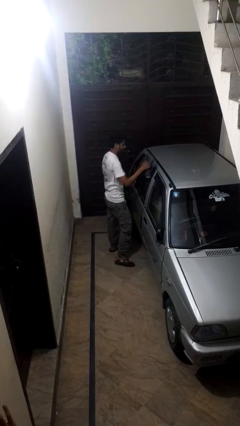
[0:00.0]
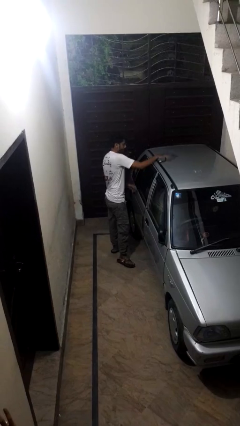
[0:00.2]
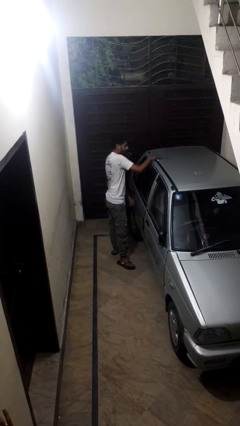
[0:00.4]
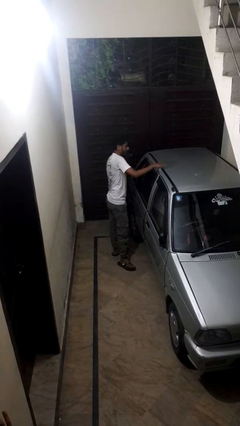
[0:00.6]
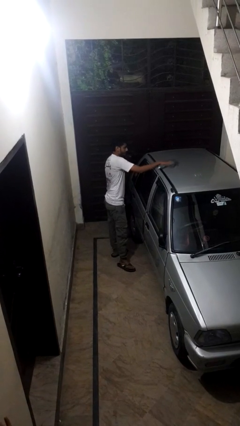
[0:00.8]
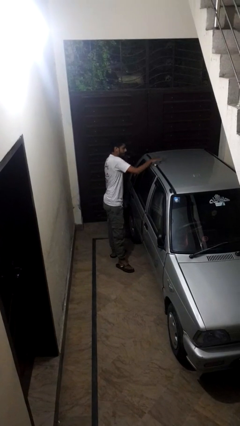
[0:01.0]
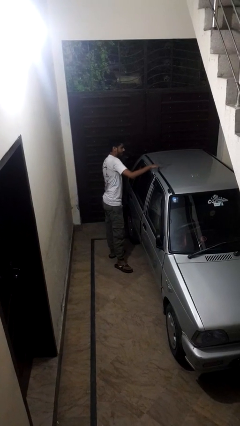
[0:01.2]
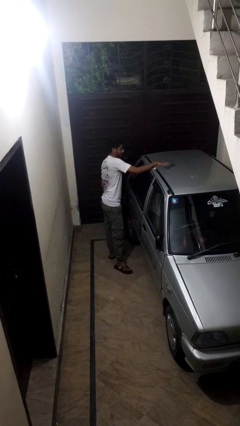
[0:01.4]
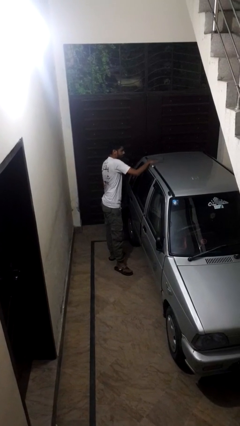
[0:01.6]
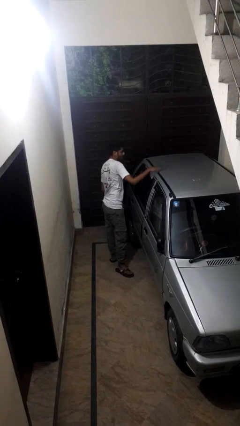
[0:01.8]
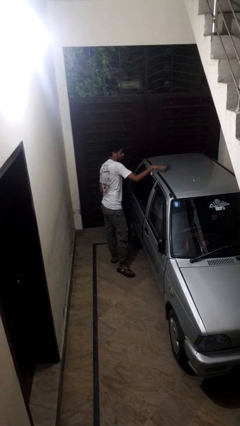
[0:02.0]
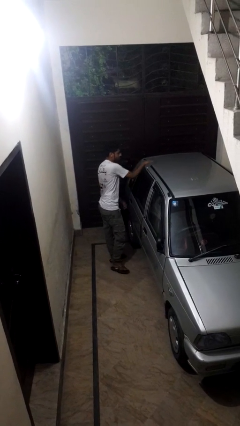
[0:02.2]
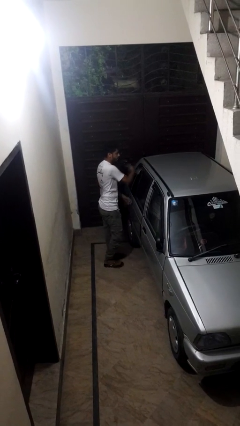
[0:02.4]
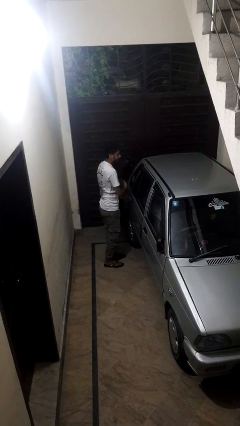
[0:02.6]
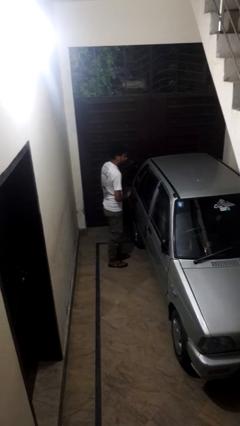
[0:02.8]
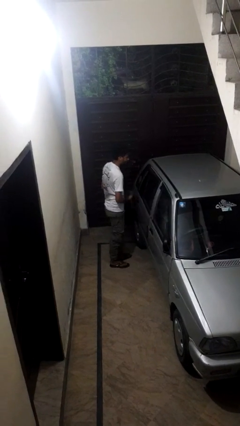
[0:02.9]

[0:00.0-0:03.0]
person polishes car with rag

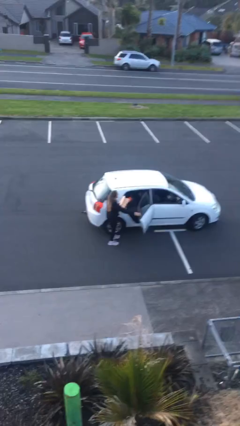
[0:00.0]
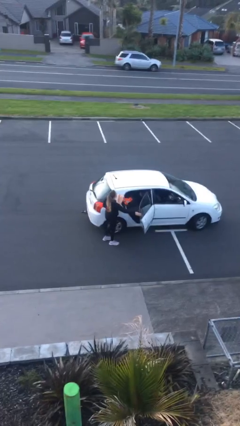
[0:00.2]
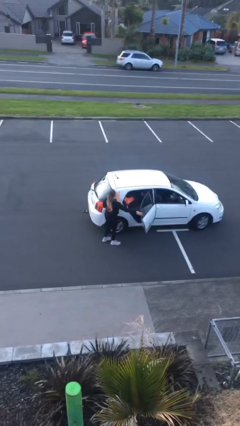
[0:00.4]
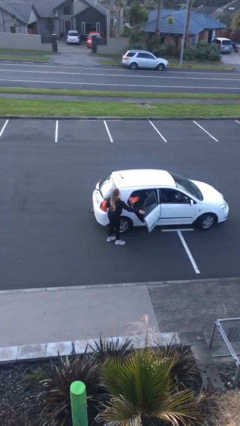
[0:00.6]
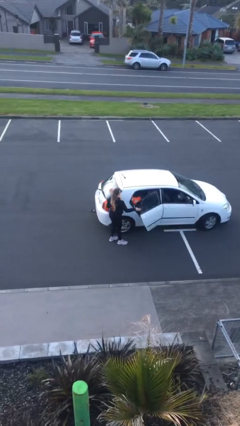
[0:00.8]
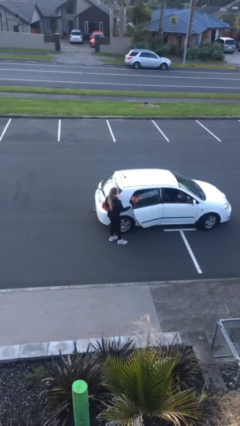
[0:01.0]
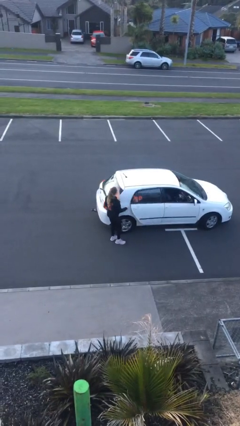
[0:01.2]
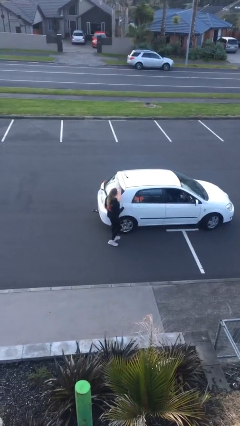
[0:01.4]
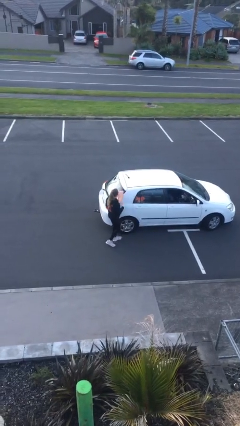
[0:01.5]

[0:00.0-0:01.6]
person closes car door

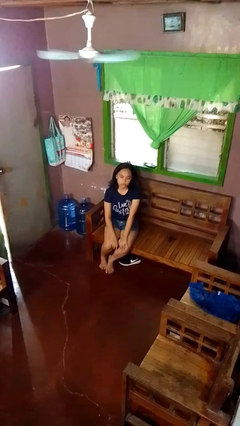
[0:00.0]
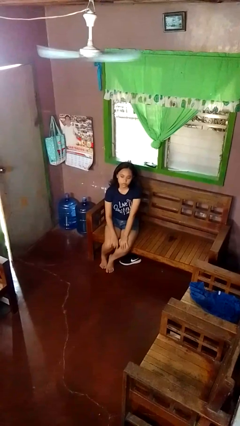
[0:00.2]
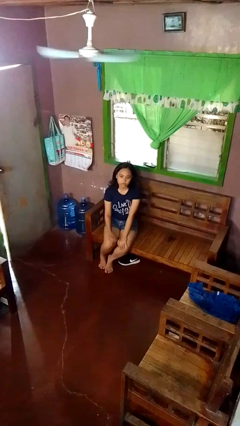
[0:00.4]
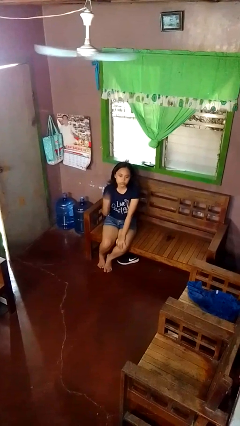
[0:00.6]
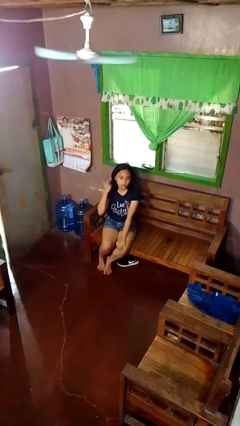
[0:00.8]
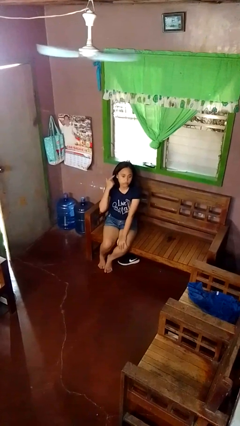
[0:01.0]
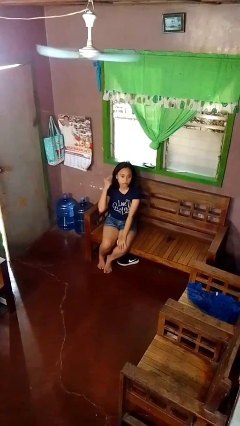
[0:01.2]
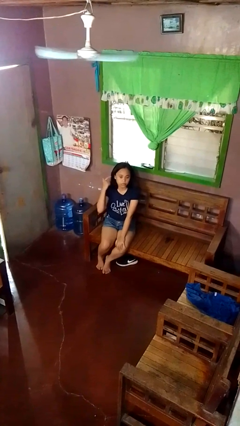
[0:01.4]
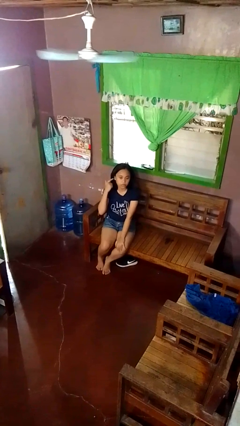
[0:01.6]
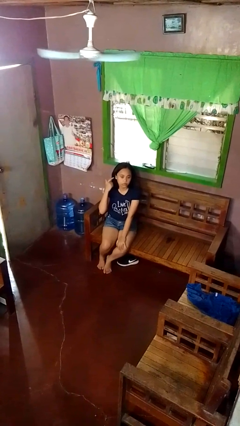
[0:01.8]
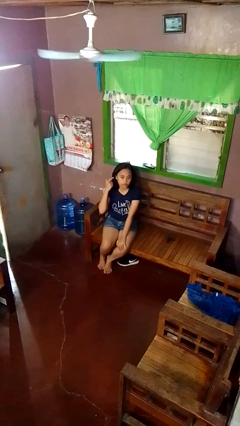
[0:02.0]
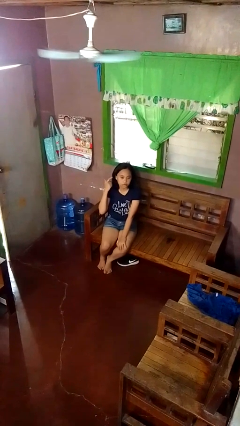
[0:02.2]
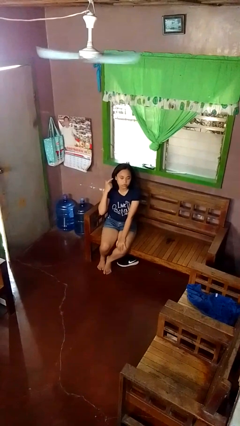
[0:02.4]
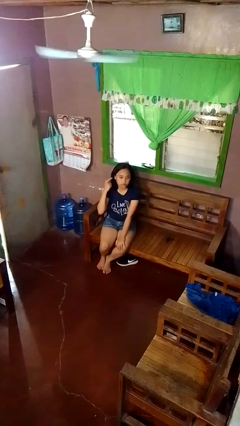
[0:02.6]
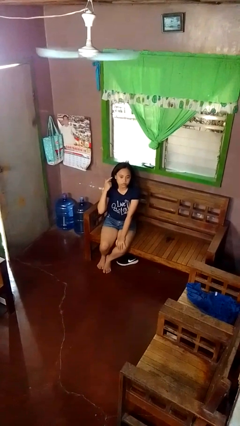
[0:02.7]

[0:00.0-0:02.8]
person gestures listen closely

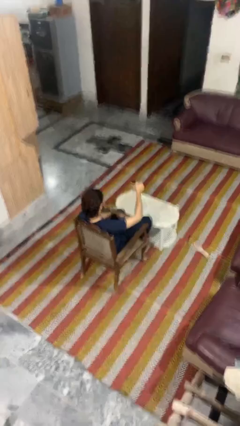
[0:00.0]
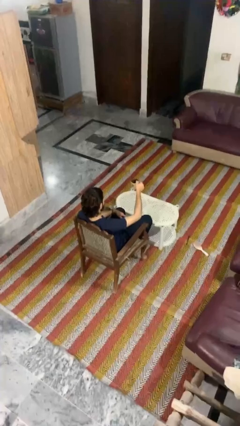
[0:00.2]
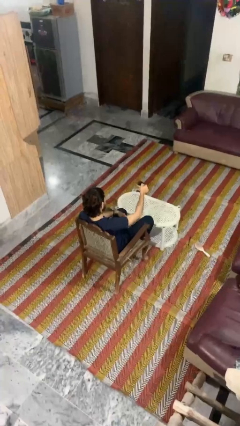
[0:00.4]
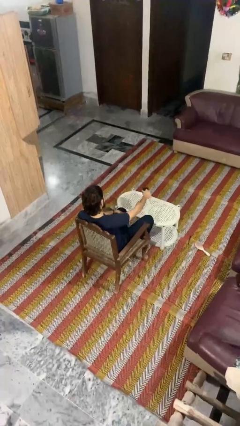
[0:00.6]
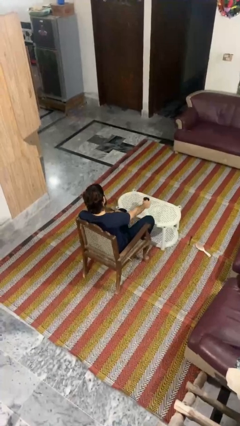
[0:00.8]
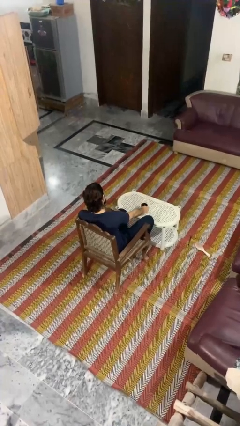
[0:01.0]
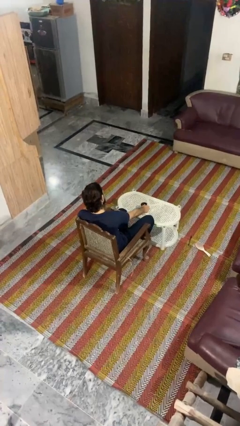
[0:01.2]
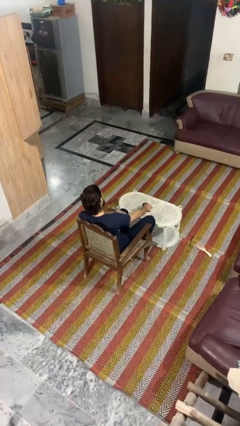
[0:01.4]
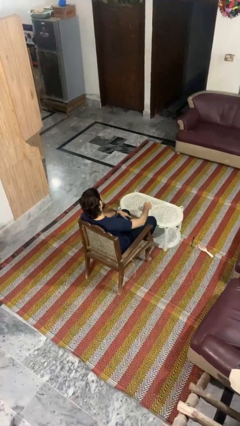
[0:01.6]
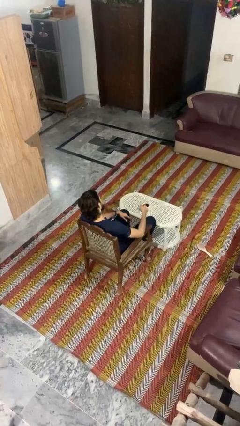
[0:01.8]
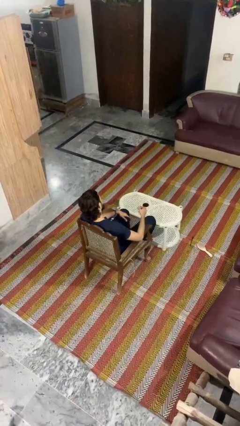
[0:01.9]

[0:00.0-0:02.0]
person puts down object on table

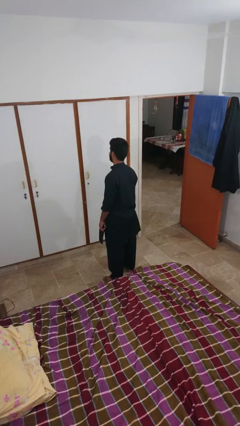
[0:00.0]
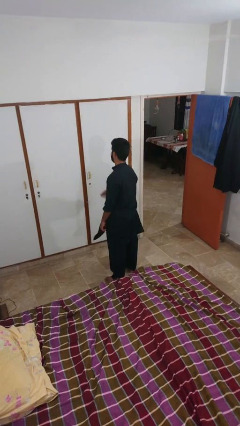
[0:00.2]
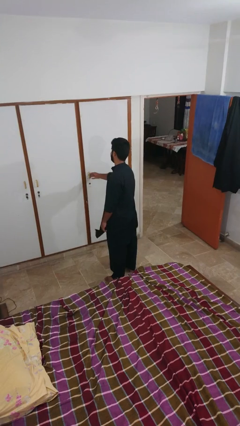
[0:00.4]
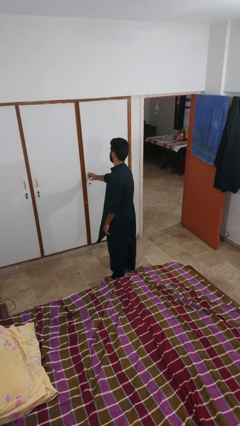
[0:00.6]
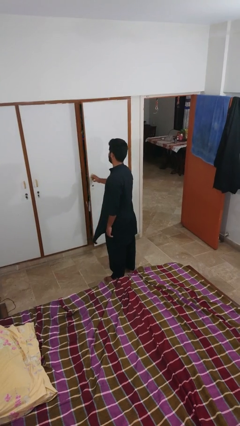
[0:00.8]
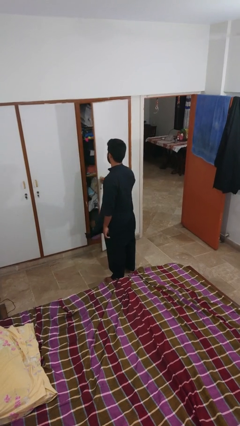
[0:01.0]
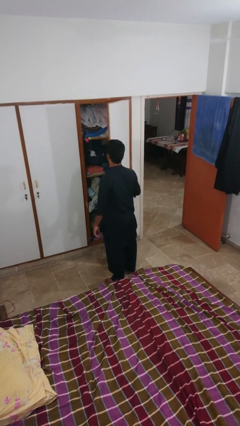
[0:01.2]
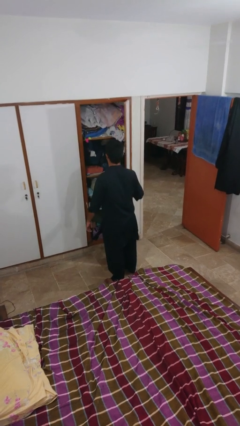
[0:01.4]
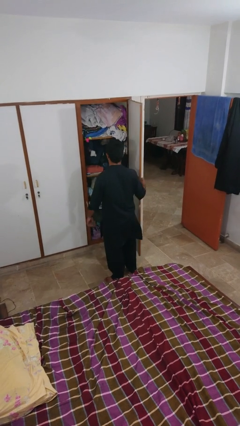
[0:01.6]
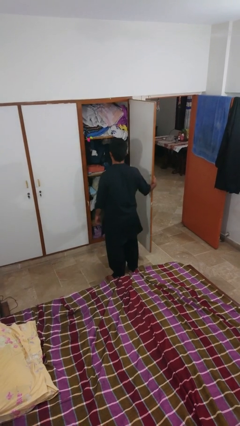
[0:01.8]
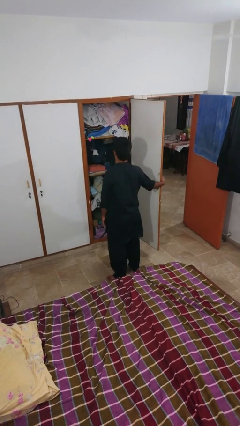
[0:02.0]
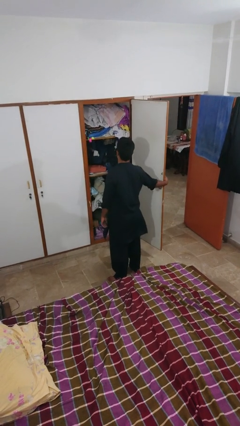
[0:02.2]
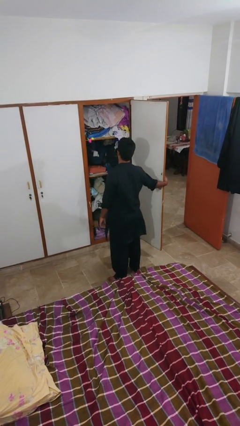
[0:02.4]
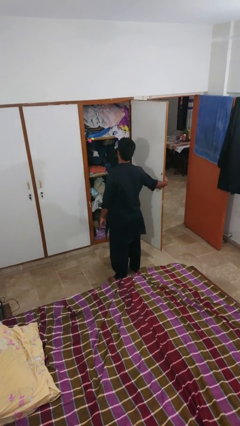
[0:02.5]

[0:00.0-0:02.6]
person opens closet door

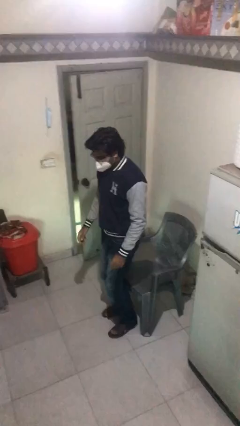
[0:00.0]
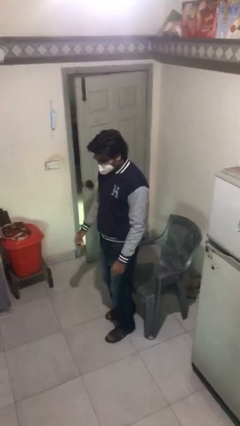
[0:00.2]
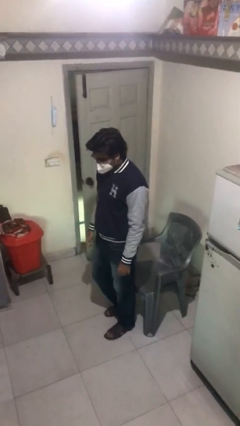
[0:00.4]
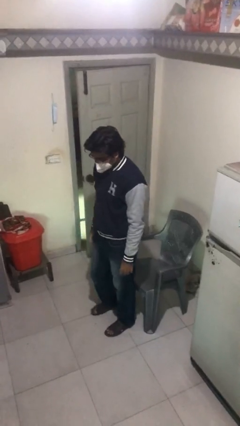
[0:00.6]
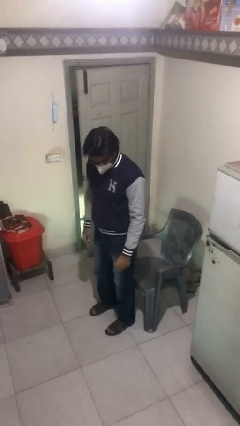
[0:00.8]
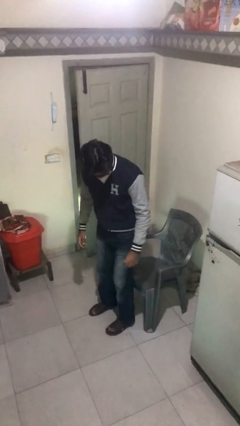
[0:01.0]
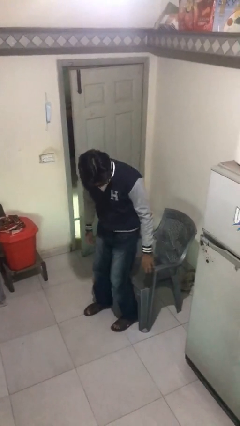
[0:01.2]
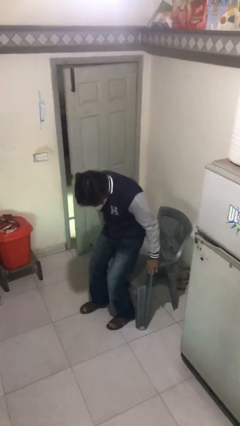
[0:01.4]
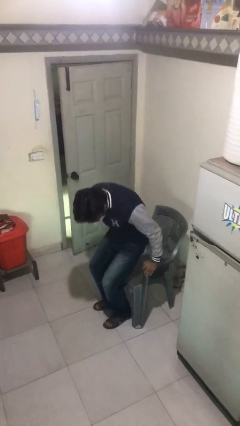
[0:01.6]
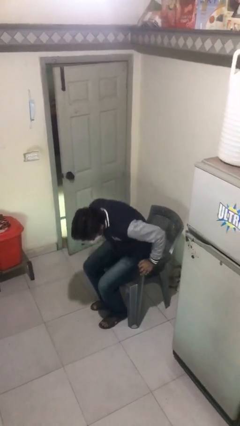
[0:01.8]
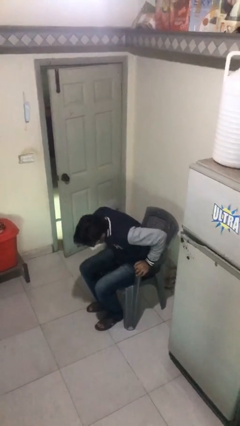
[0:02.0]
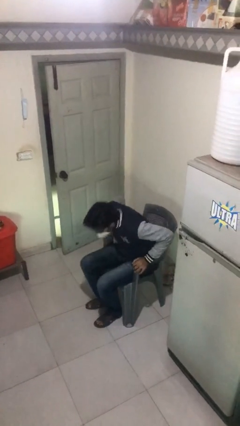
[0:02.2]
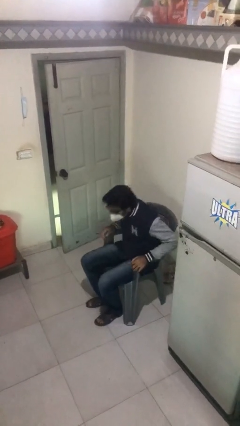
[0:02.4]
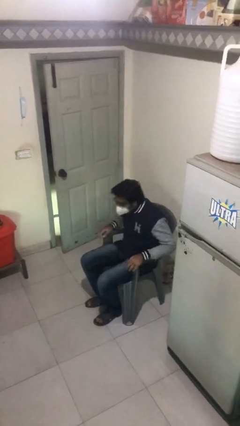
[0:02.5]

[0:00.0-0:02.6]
person sits down

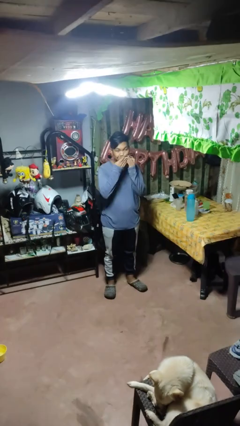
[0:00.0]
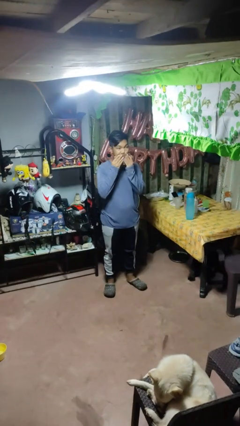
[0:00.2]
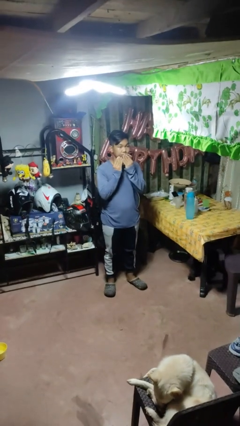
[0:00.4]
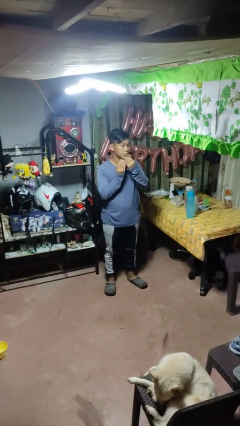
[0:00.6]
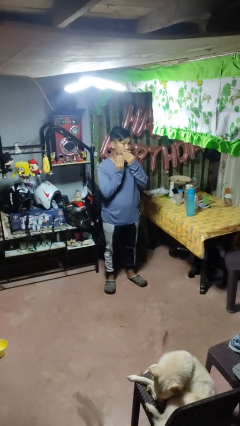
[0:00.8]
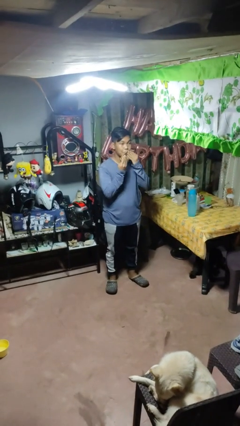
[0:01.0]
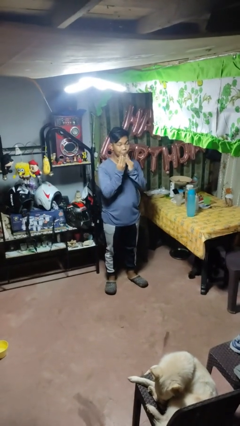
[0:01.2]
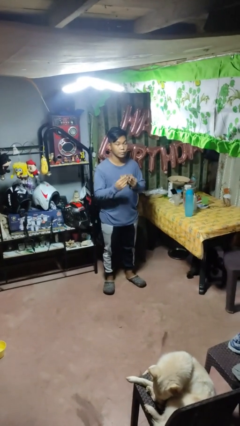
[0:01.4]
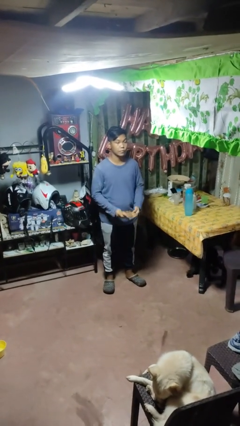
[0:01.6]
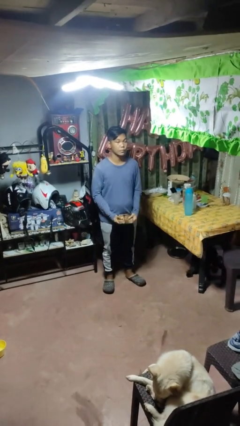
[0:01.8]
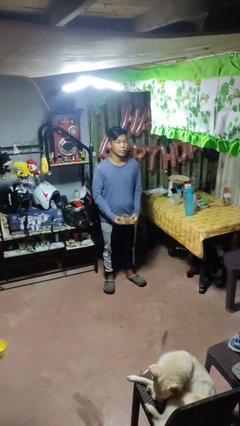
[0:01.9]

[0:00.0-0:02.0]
person wipes mouth with napkin

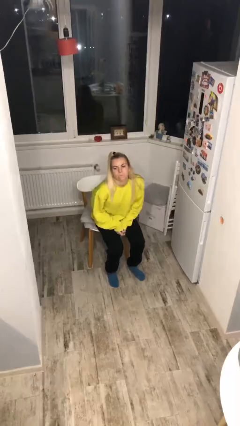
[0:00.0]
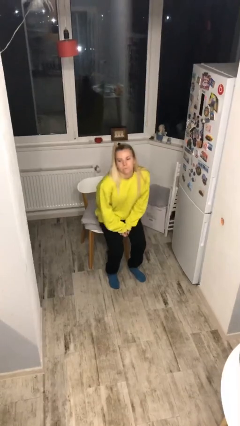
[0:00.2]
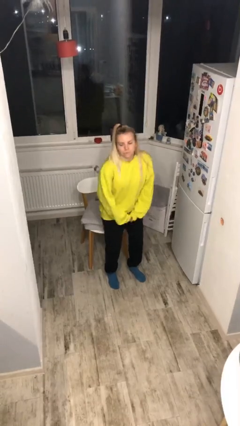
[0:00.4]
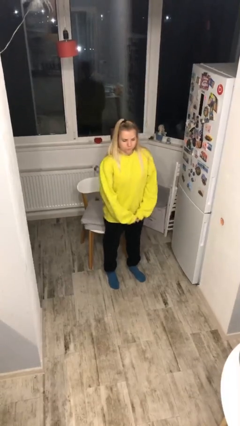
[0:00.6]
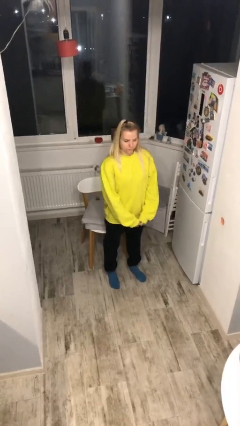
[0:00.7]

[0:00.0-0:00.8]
person stands up
